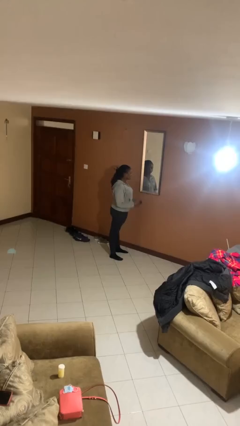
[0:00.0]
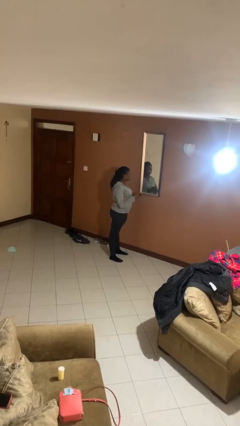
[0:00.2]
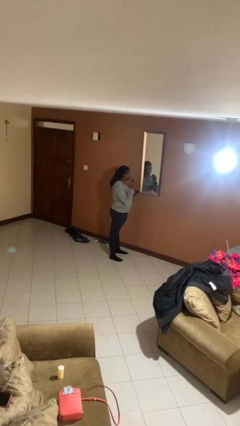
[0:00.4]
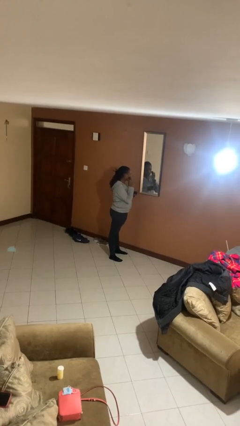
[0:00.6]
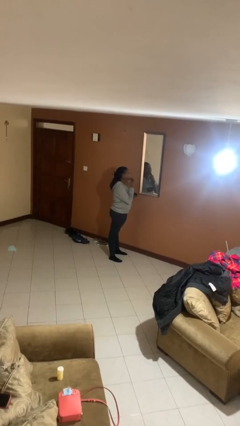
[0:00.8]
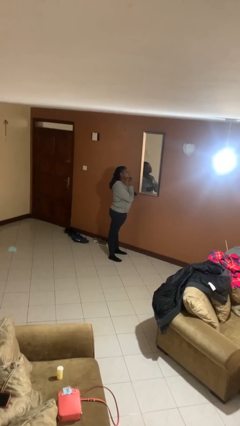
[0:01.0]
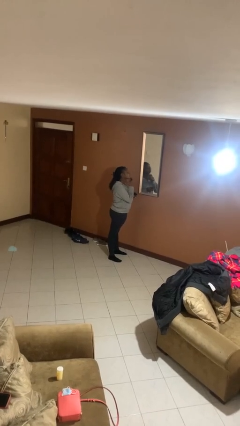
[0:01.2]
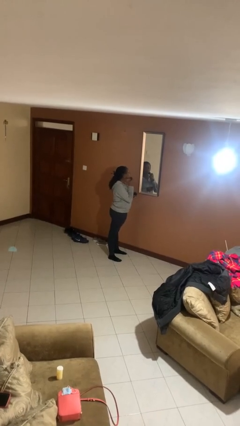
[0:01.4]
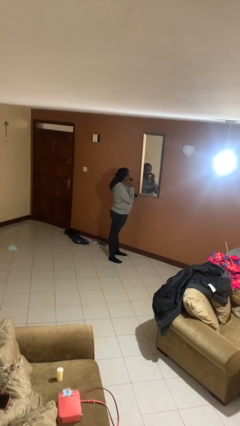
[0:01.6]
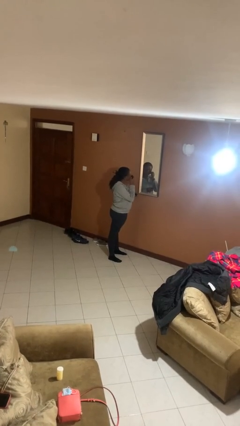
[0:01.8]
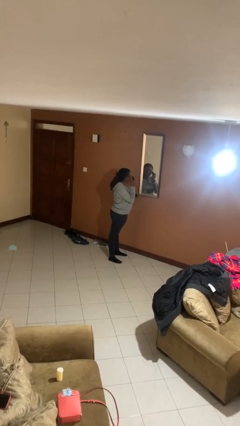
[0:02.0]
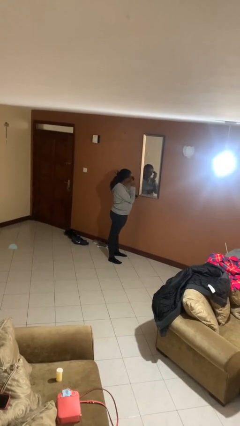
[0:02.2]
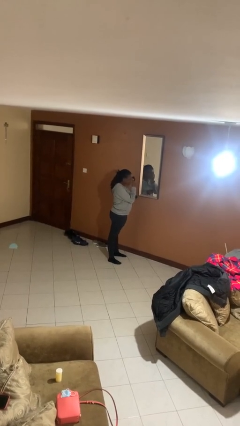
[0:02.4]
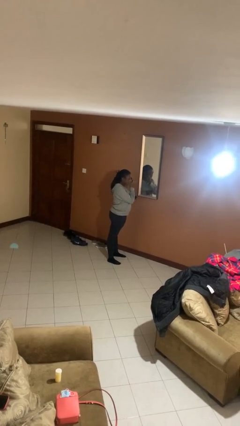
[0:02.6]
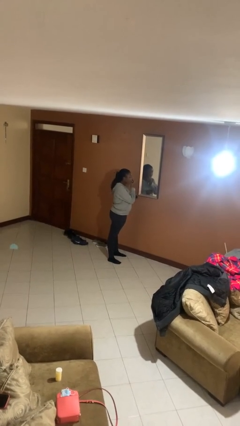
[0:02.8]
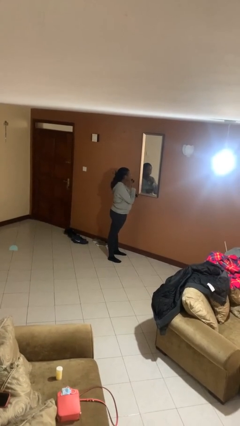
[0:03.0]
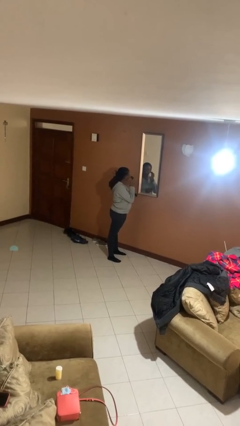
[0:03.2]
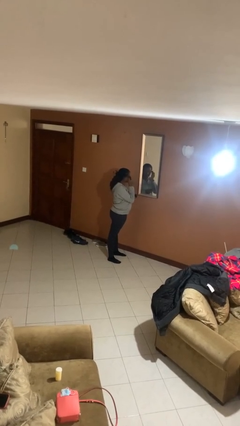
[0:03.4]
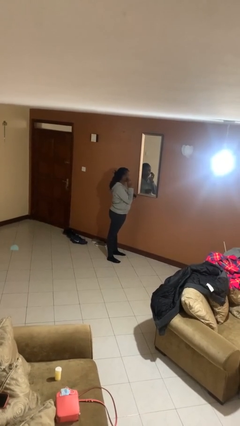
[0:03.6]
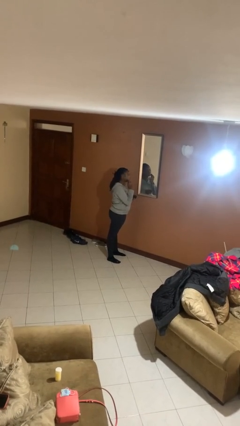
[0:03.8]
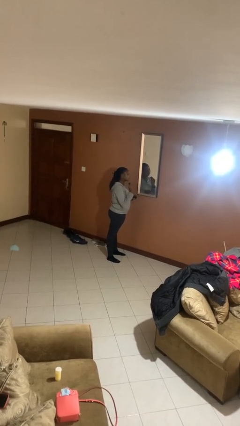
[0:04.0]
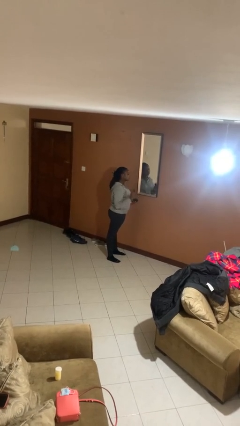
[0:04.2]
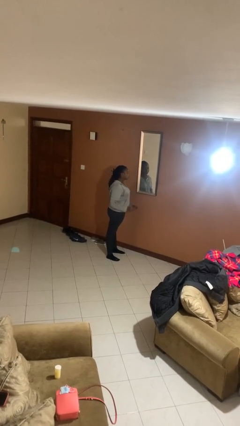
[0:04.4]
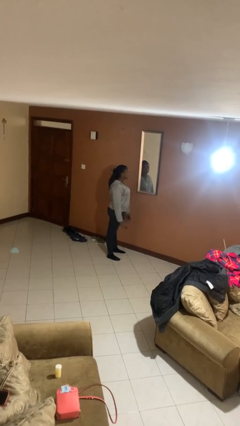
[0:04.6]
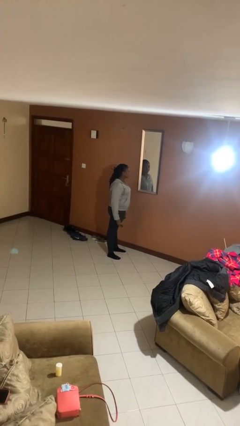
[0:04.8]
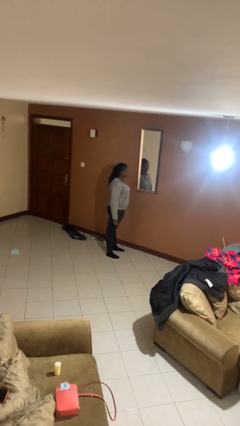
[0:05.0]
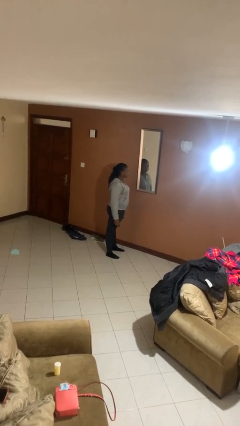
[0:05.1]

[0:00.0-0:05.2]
person applies foundation makeup

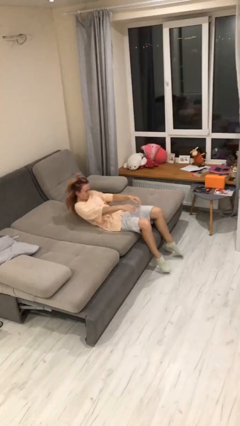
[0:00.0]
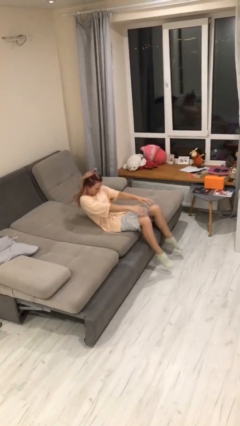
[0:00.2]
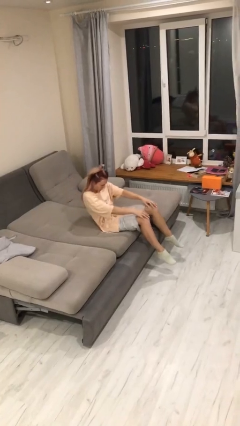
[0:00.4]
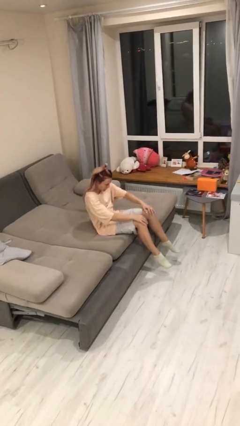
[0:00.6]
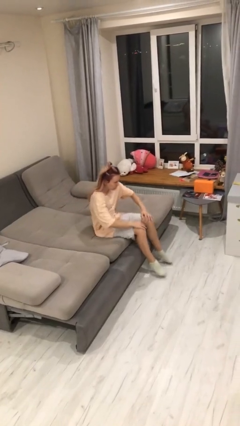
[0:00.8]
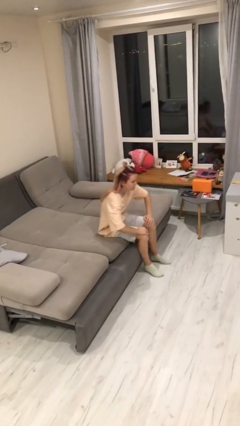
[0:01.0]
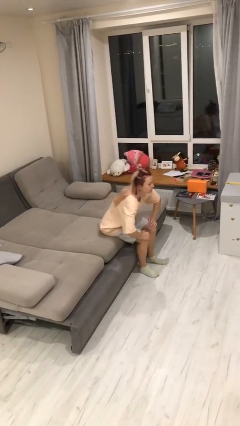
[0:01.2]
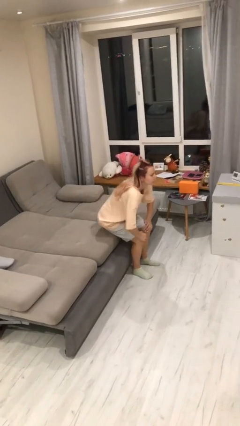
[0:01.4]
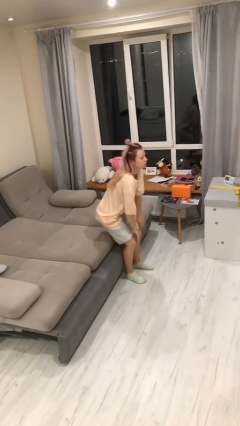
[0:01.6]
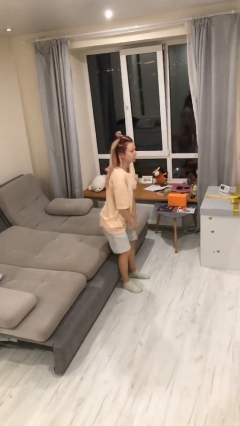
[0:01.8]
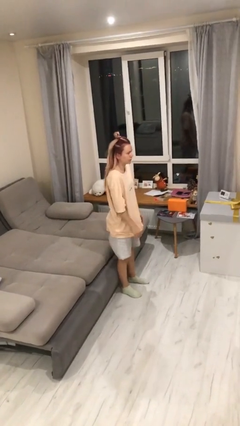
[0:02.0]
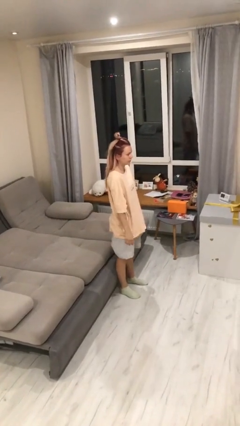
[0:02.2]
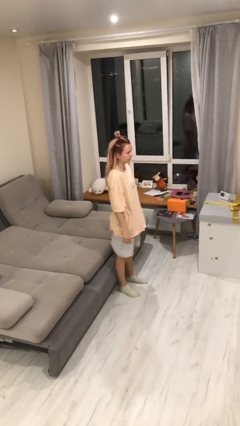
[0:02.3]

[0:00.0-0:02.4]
person stands up

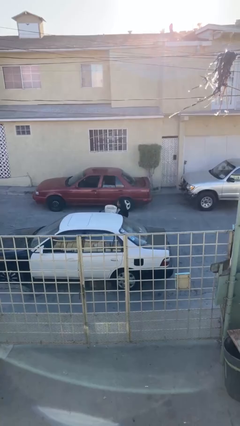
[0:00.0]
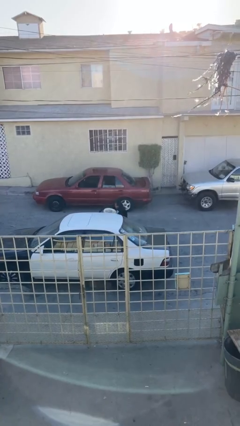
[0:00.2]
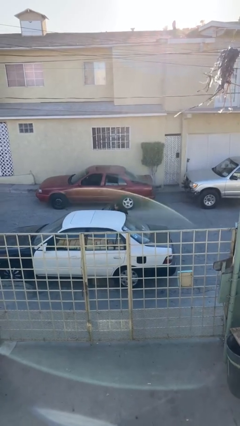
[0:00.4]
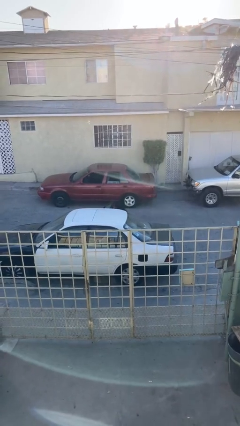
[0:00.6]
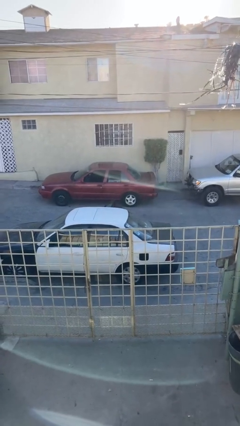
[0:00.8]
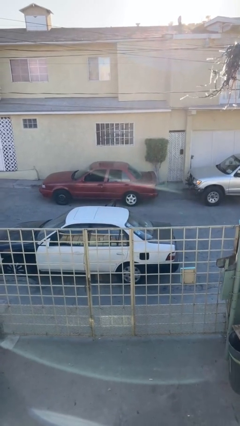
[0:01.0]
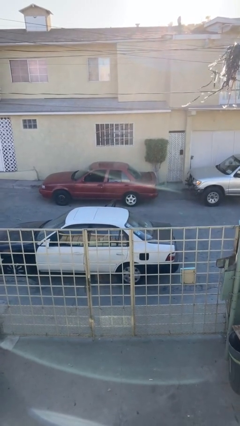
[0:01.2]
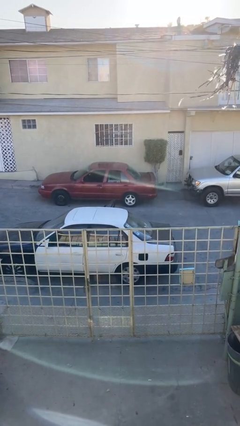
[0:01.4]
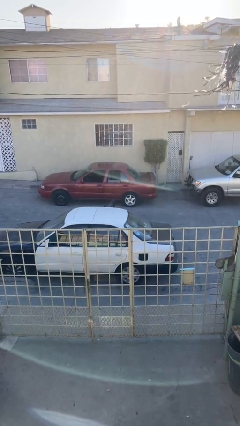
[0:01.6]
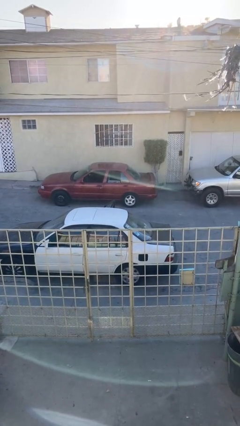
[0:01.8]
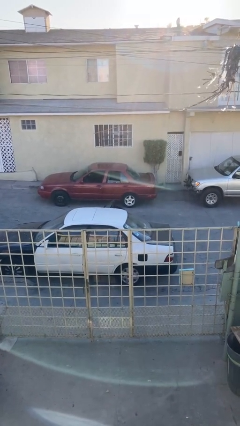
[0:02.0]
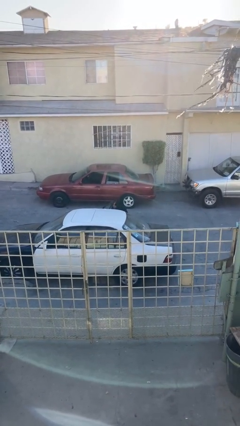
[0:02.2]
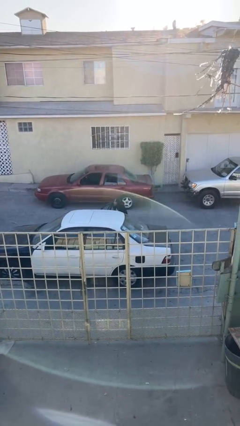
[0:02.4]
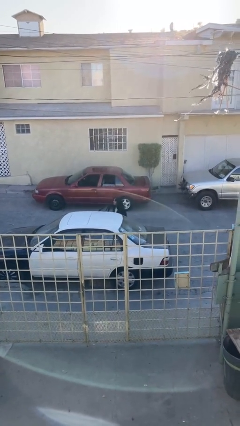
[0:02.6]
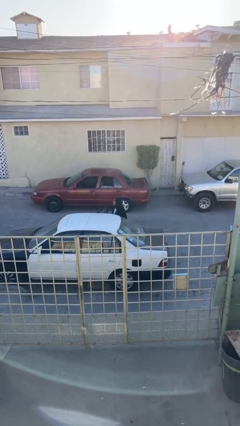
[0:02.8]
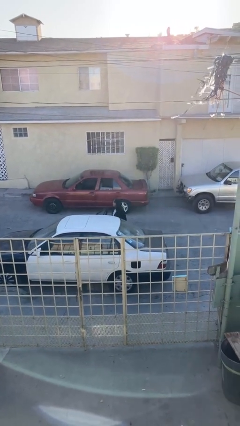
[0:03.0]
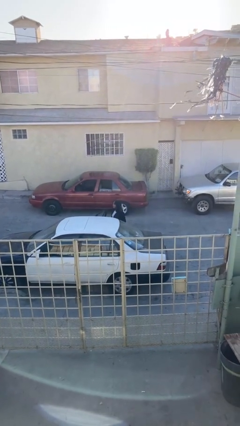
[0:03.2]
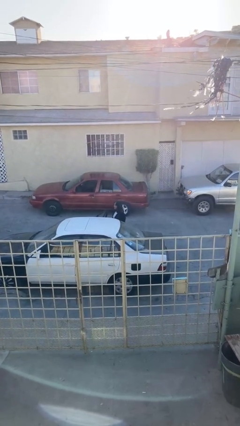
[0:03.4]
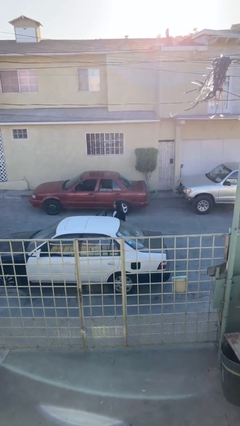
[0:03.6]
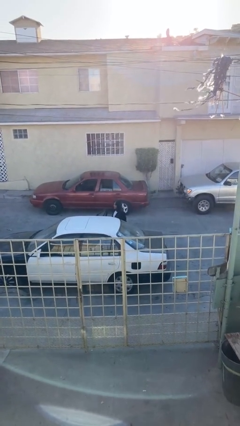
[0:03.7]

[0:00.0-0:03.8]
person loads car

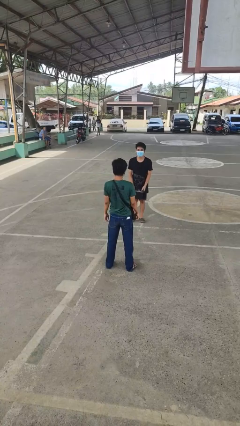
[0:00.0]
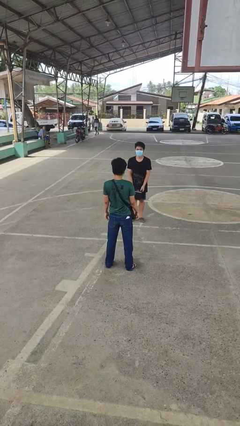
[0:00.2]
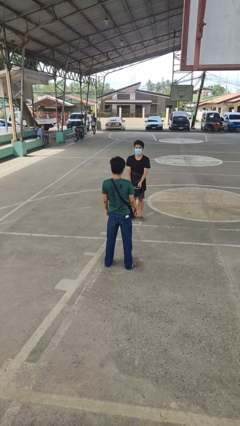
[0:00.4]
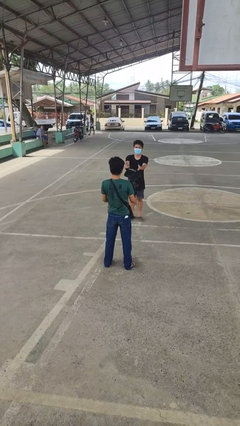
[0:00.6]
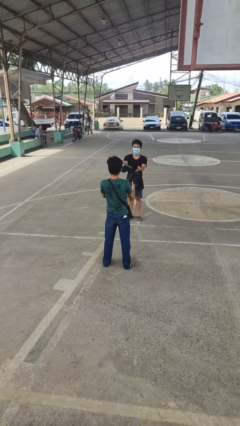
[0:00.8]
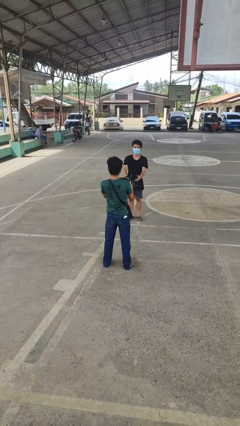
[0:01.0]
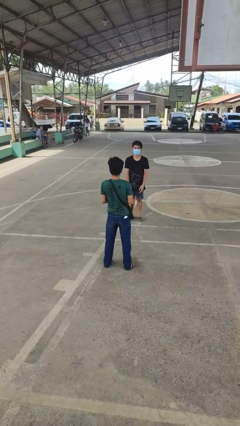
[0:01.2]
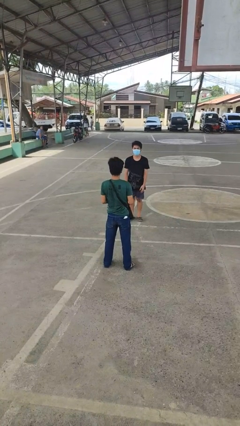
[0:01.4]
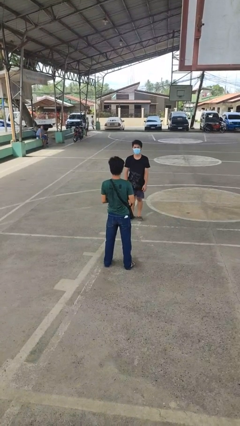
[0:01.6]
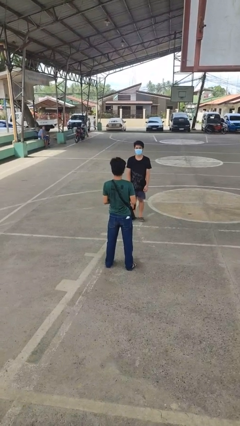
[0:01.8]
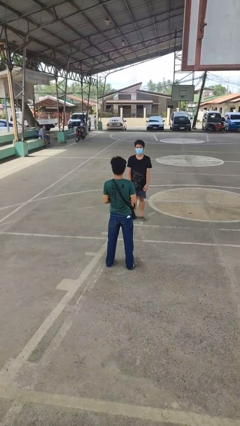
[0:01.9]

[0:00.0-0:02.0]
person catches object from person

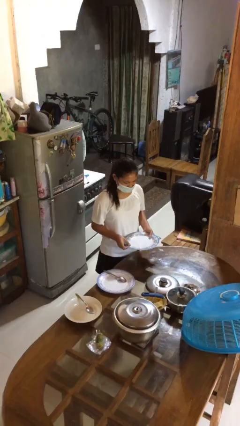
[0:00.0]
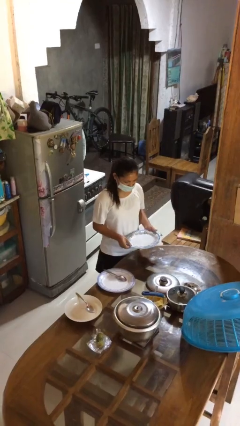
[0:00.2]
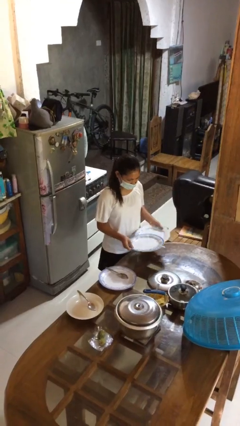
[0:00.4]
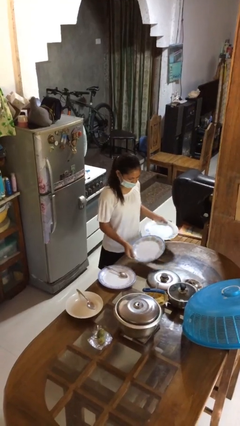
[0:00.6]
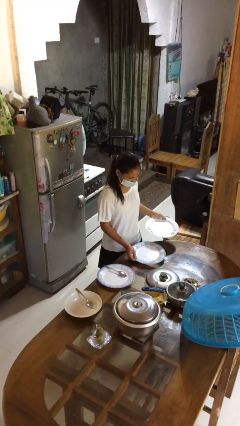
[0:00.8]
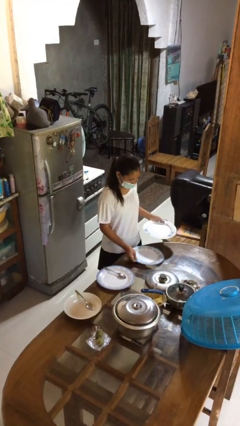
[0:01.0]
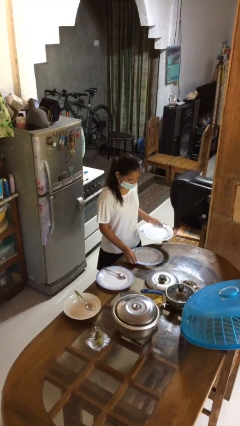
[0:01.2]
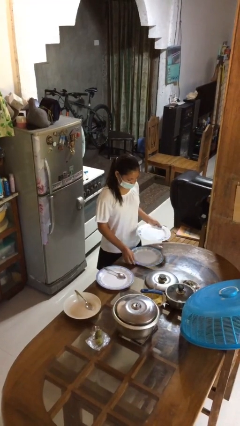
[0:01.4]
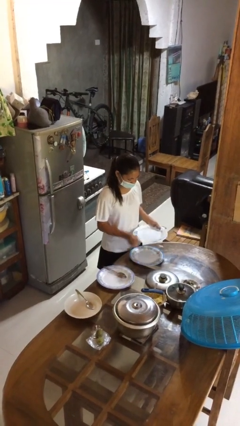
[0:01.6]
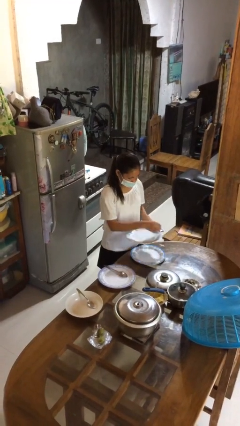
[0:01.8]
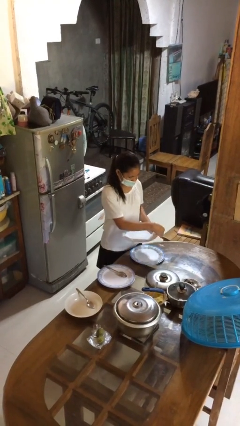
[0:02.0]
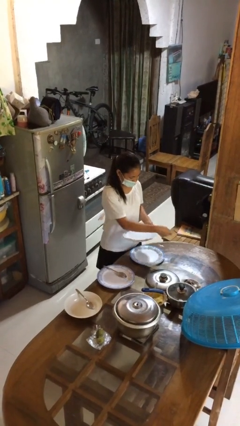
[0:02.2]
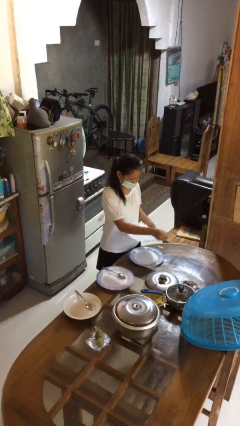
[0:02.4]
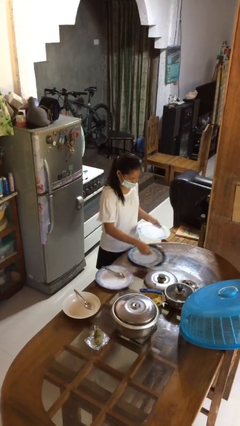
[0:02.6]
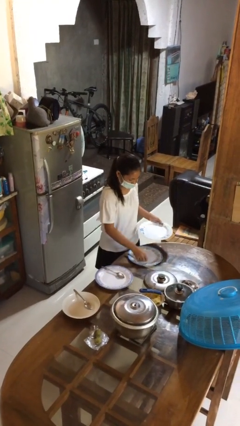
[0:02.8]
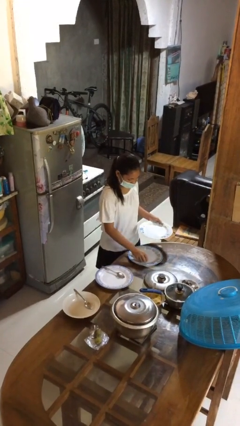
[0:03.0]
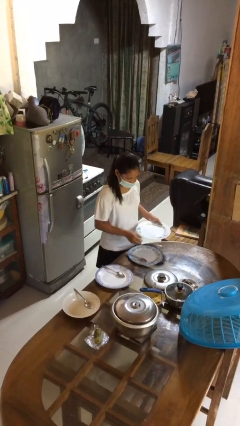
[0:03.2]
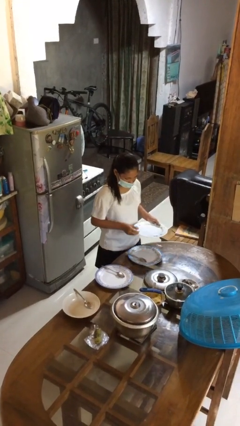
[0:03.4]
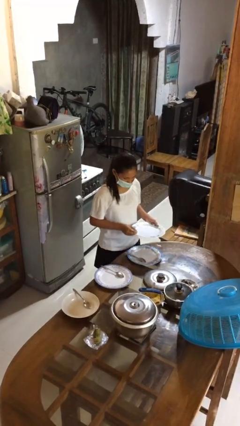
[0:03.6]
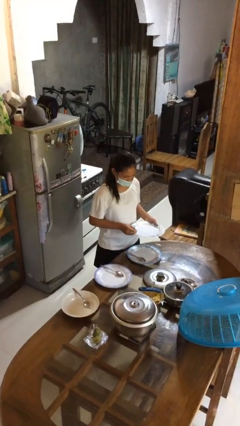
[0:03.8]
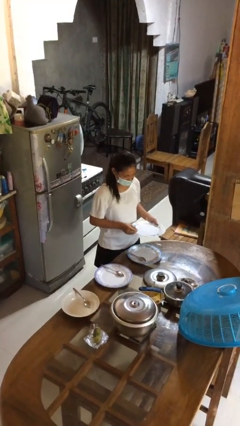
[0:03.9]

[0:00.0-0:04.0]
person sets table
